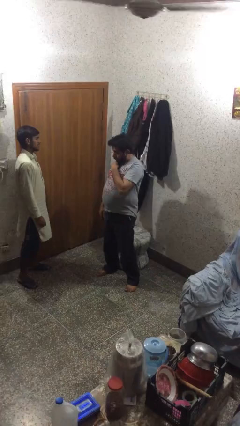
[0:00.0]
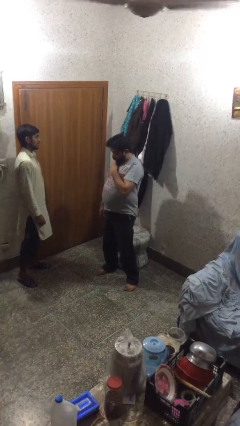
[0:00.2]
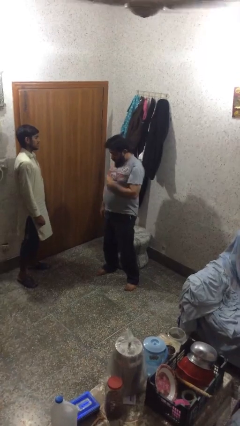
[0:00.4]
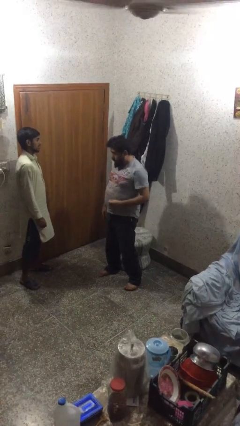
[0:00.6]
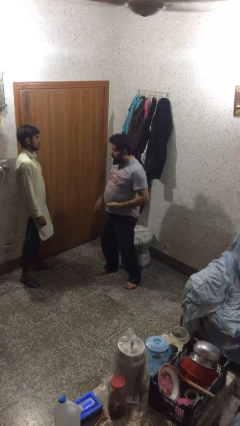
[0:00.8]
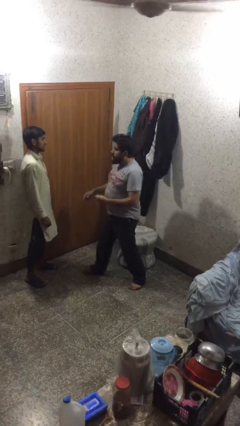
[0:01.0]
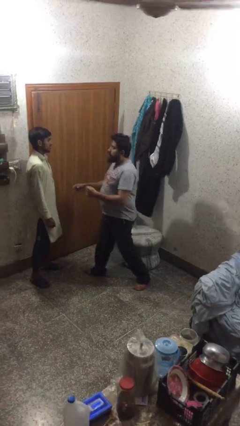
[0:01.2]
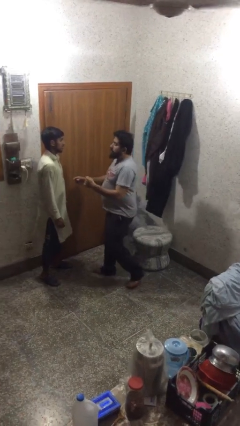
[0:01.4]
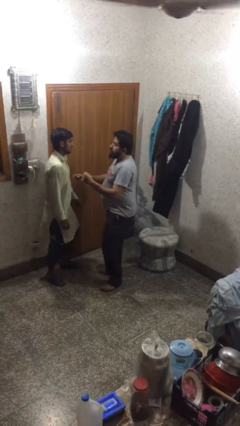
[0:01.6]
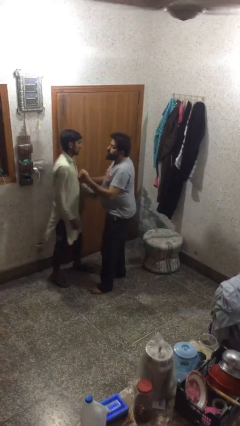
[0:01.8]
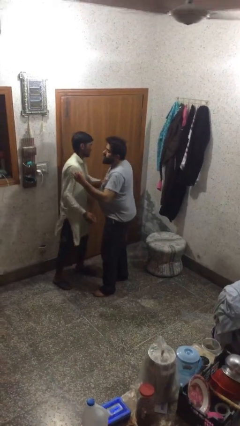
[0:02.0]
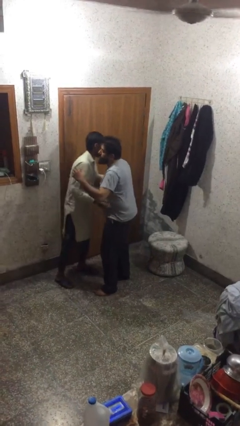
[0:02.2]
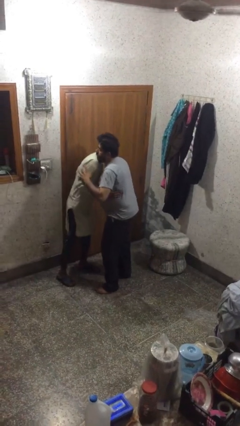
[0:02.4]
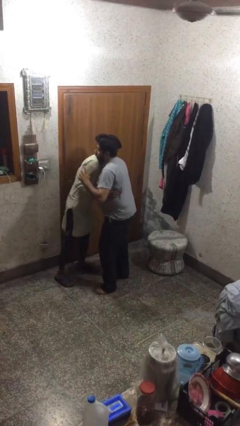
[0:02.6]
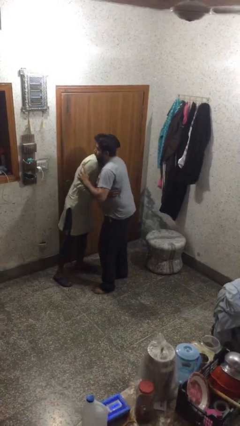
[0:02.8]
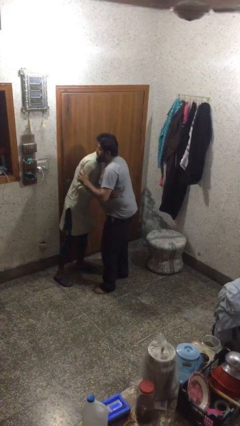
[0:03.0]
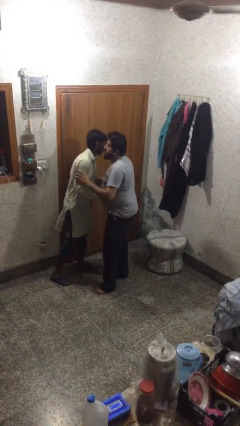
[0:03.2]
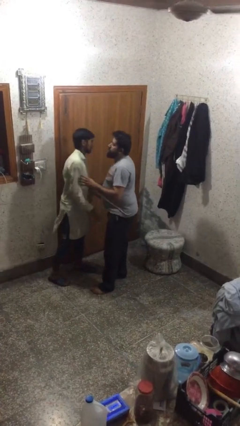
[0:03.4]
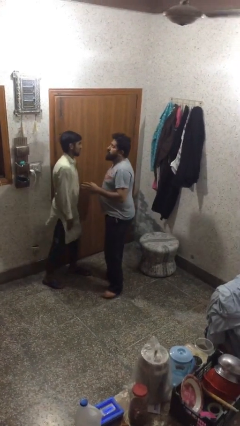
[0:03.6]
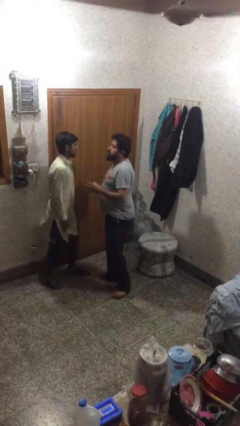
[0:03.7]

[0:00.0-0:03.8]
person embraces person

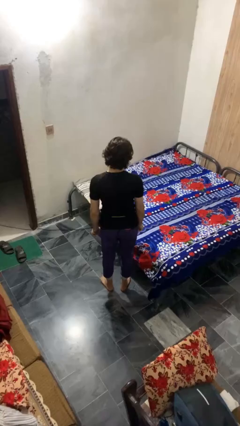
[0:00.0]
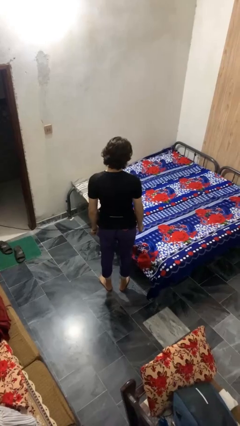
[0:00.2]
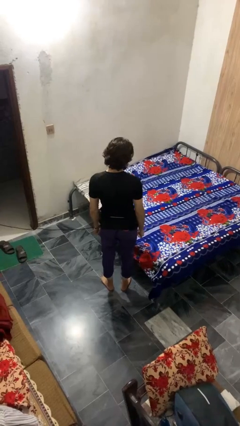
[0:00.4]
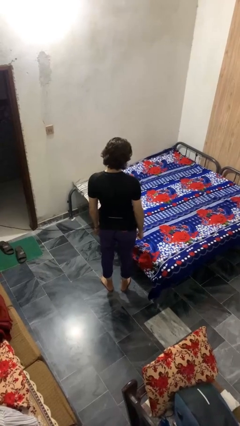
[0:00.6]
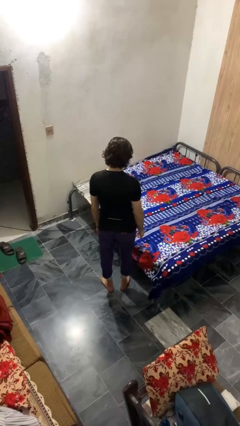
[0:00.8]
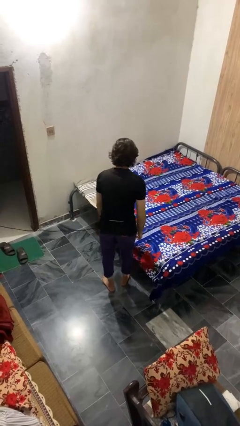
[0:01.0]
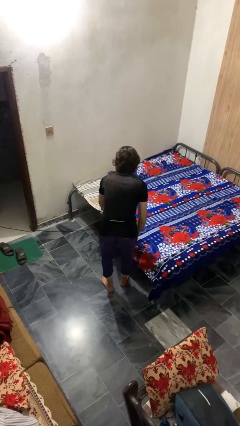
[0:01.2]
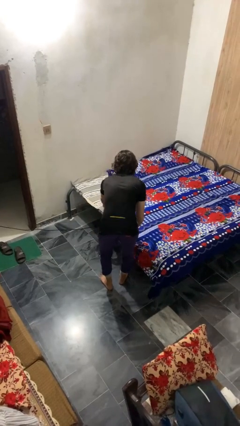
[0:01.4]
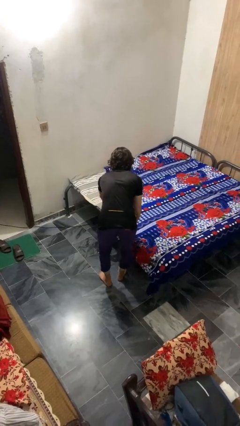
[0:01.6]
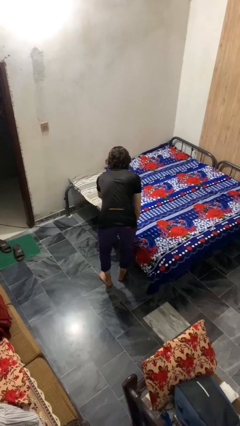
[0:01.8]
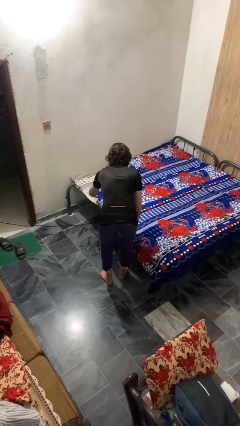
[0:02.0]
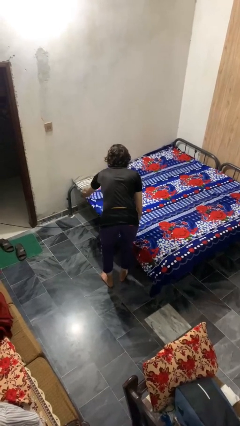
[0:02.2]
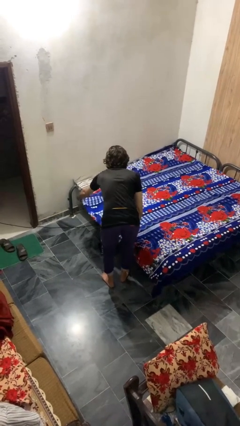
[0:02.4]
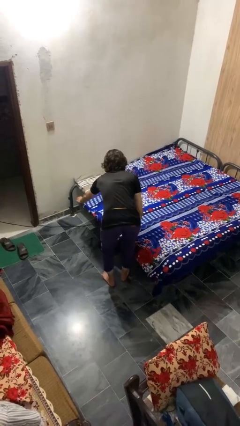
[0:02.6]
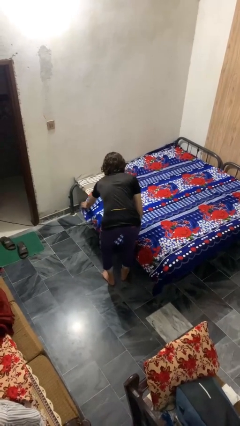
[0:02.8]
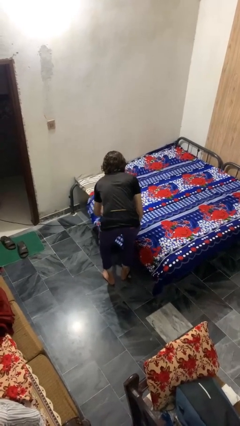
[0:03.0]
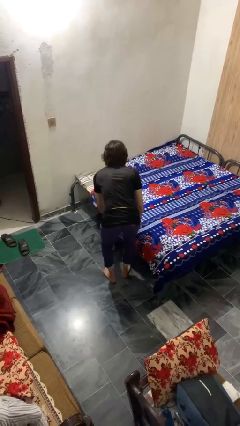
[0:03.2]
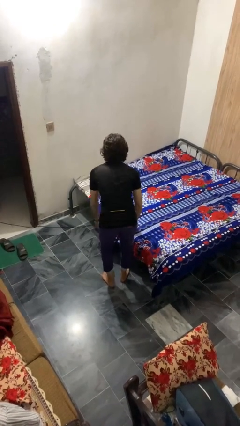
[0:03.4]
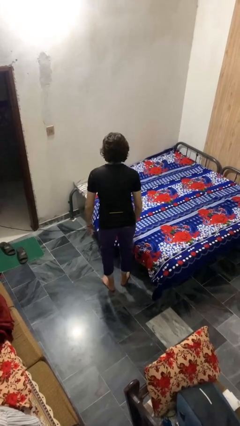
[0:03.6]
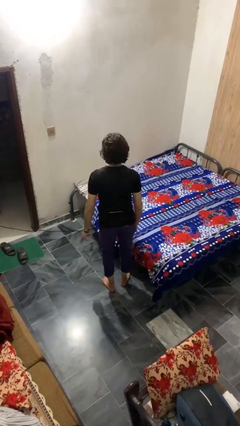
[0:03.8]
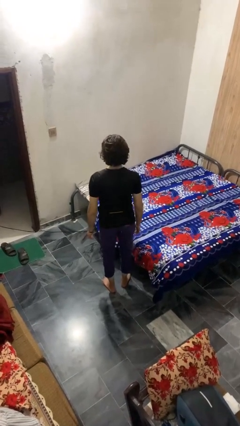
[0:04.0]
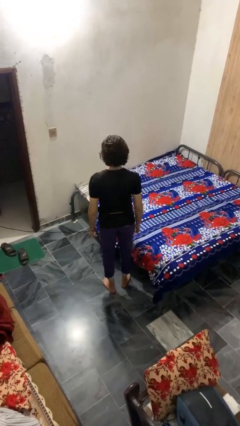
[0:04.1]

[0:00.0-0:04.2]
person makes bed

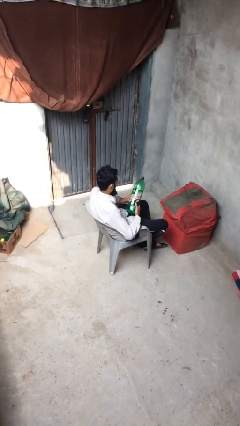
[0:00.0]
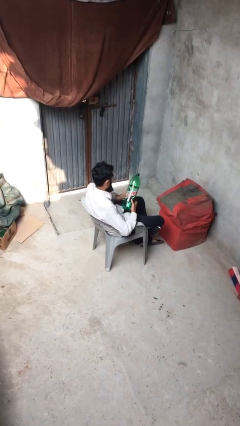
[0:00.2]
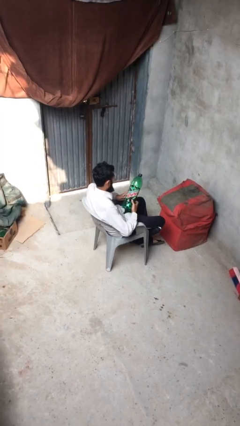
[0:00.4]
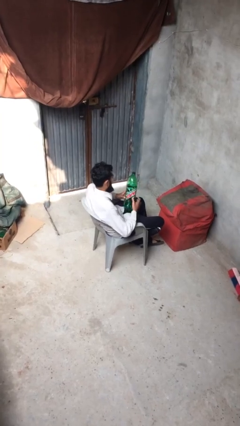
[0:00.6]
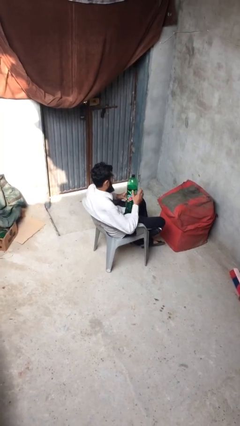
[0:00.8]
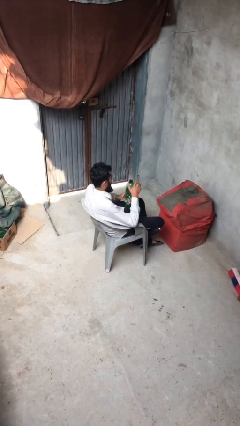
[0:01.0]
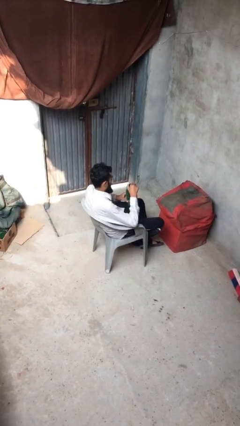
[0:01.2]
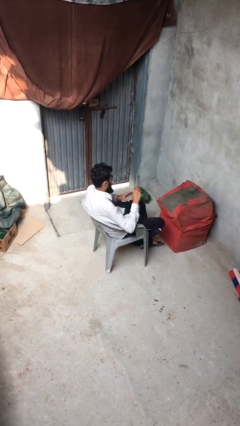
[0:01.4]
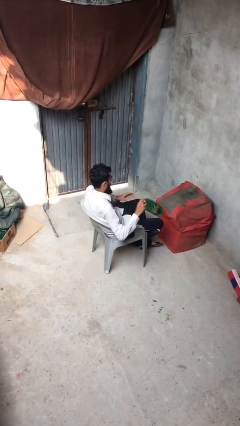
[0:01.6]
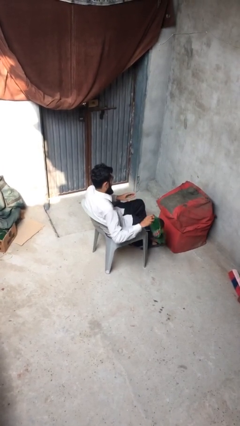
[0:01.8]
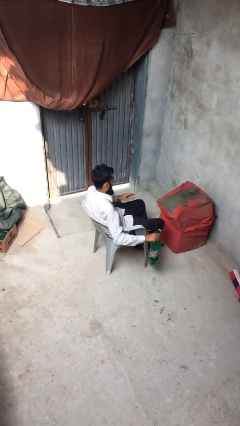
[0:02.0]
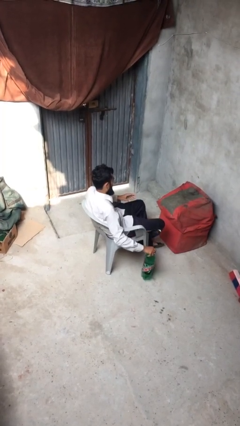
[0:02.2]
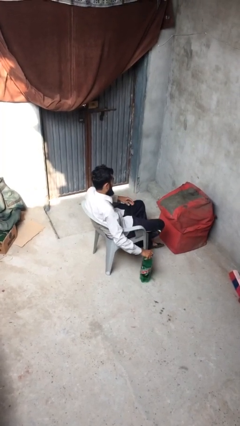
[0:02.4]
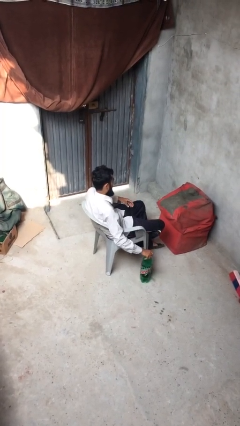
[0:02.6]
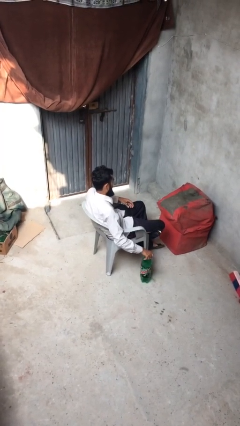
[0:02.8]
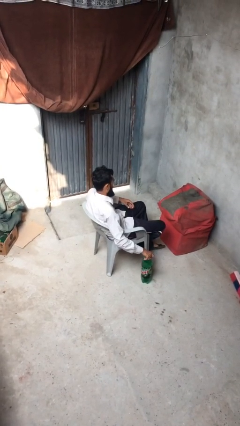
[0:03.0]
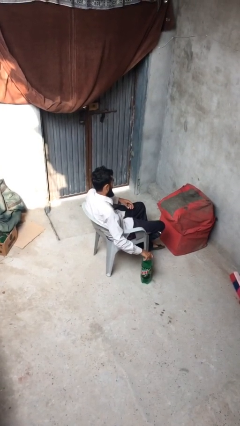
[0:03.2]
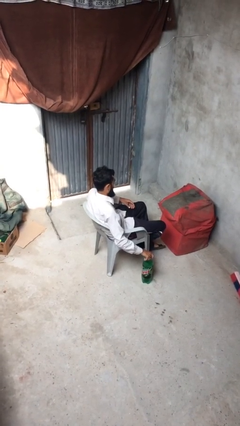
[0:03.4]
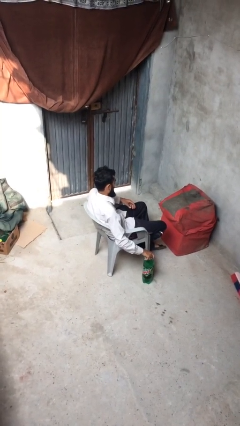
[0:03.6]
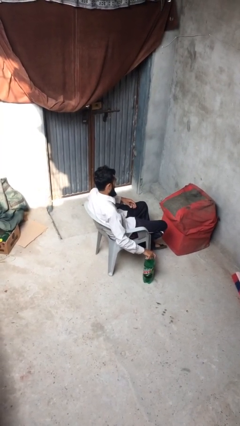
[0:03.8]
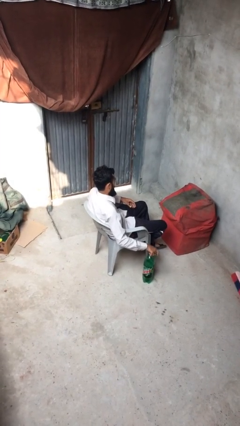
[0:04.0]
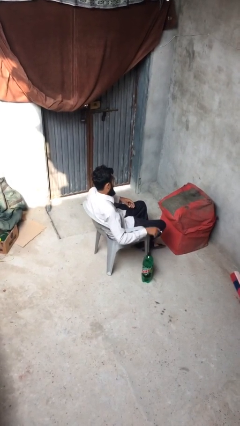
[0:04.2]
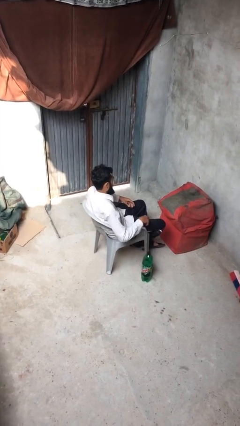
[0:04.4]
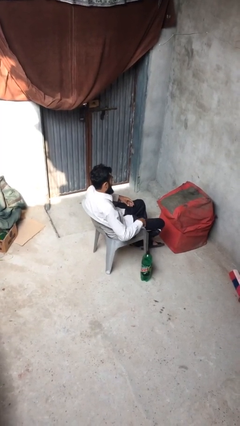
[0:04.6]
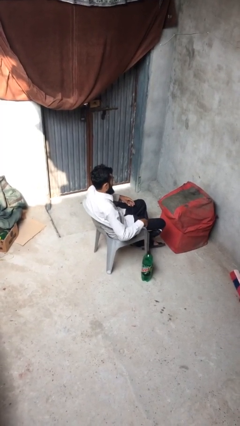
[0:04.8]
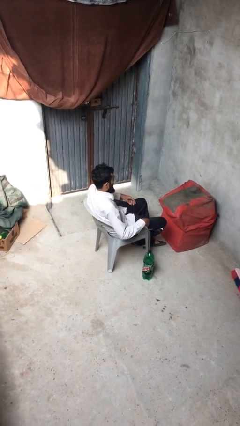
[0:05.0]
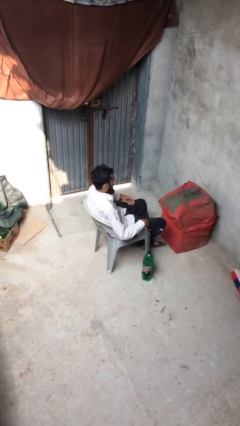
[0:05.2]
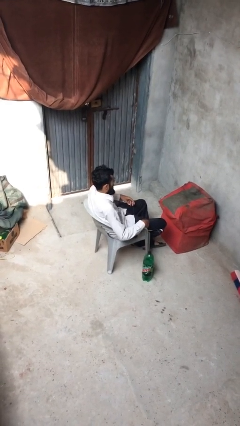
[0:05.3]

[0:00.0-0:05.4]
person puts down object on floor

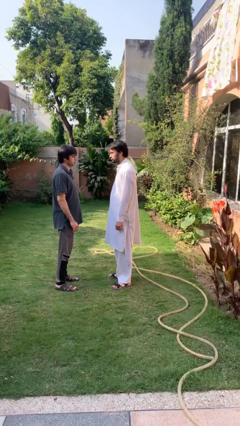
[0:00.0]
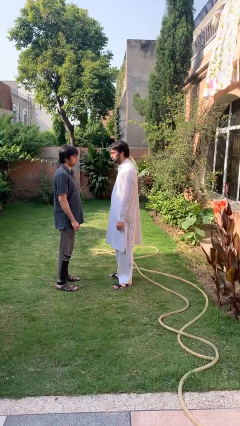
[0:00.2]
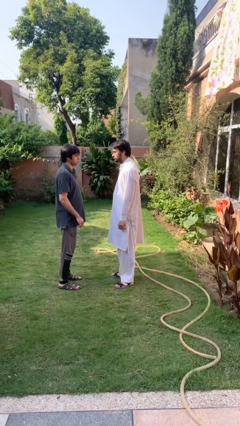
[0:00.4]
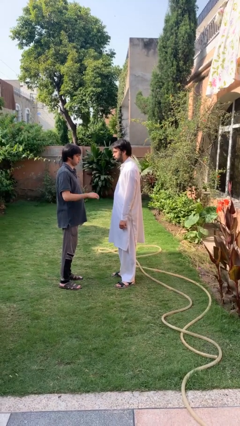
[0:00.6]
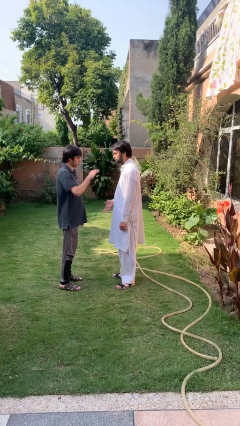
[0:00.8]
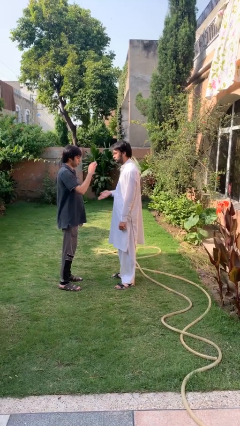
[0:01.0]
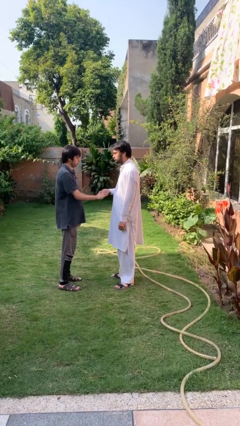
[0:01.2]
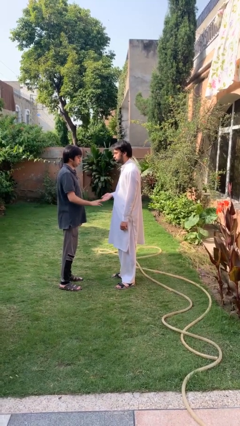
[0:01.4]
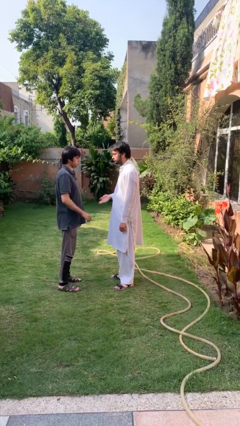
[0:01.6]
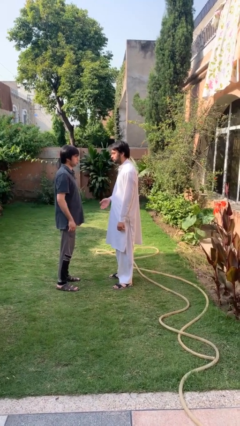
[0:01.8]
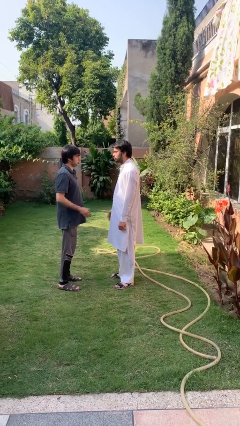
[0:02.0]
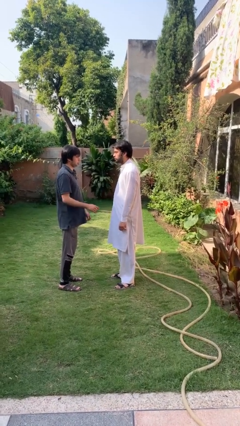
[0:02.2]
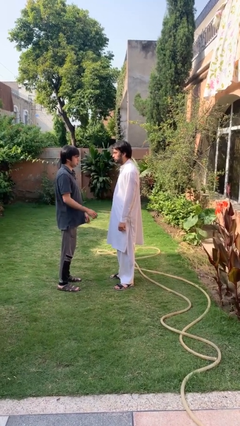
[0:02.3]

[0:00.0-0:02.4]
person highfives hand

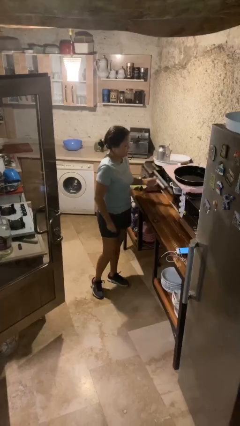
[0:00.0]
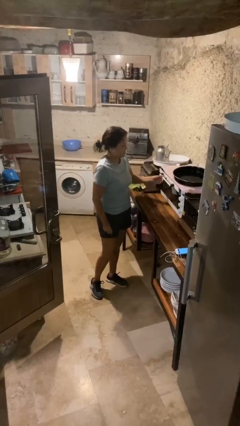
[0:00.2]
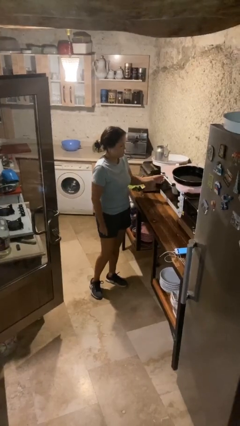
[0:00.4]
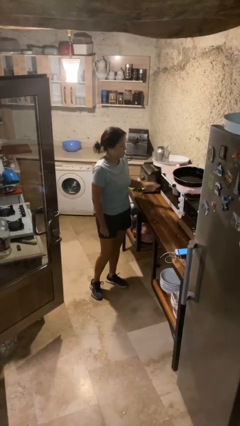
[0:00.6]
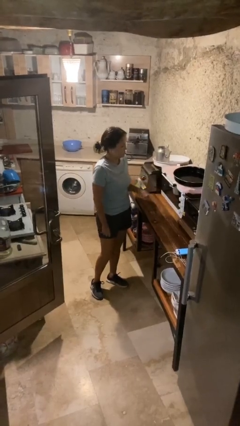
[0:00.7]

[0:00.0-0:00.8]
person closes microwave

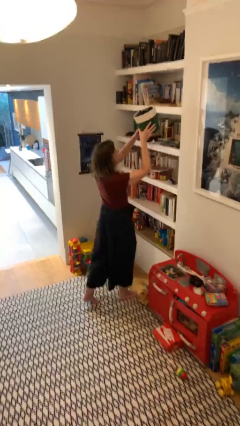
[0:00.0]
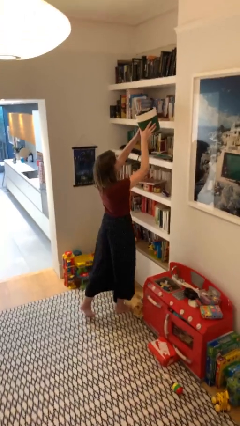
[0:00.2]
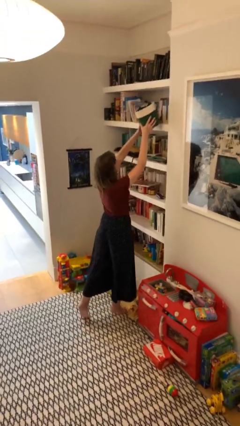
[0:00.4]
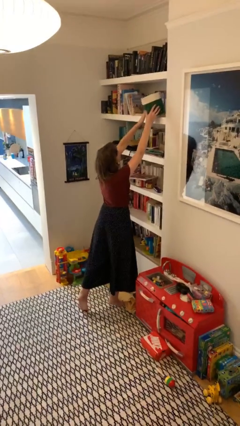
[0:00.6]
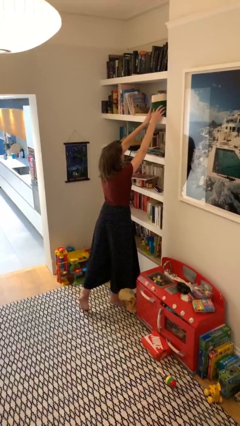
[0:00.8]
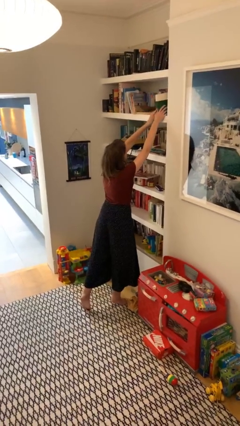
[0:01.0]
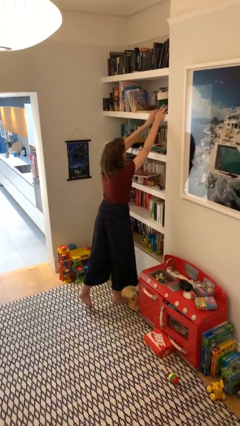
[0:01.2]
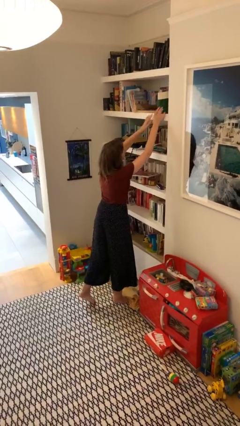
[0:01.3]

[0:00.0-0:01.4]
person puts down object on shelf
